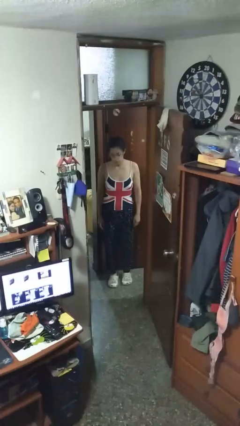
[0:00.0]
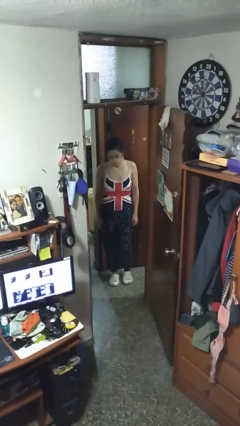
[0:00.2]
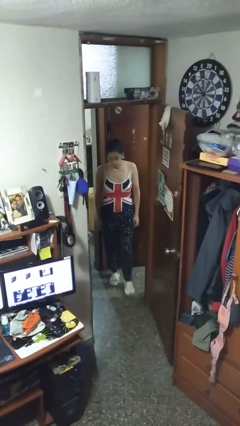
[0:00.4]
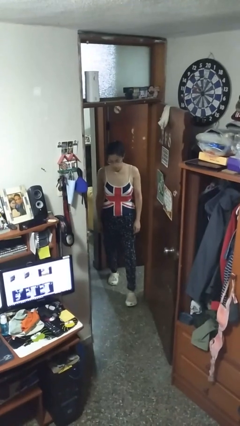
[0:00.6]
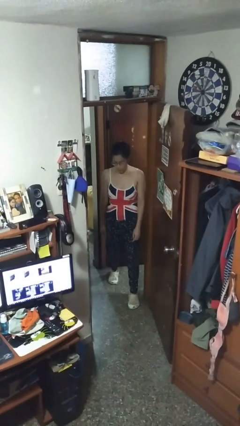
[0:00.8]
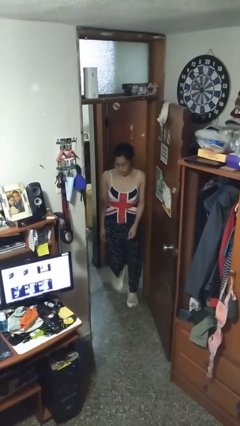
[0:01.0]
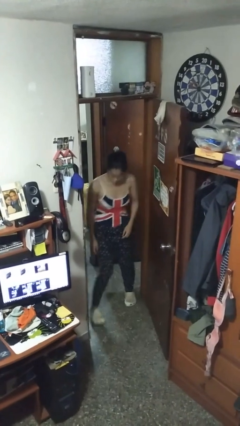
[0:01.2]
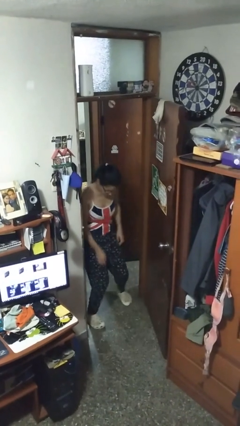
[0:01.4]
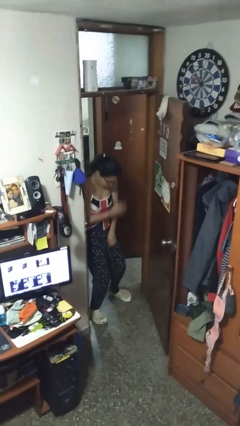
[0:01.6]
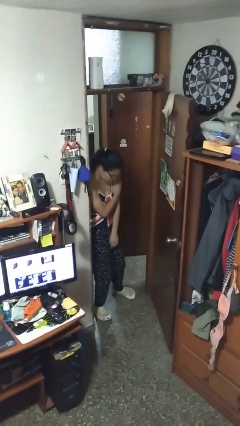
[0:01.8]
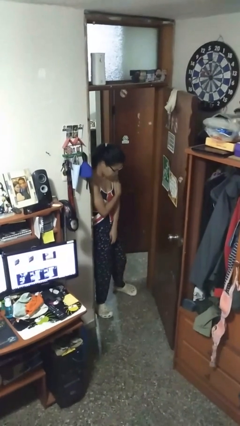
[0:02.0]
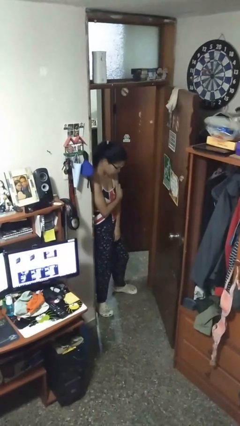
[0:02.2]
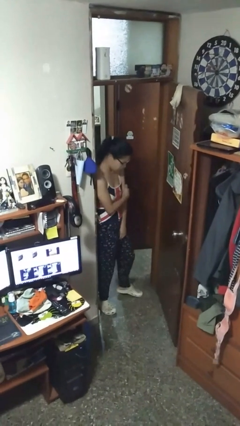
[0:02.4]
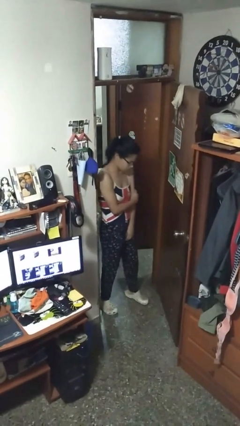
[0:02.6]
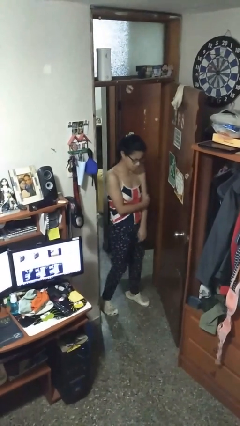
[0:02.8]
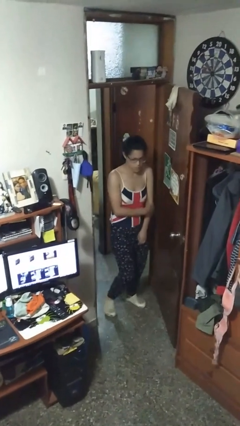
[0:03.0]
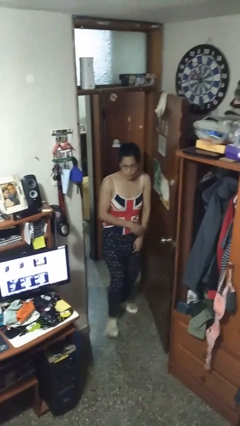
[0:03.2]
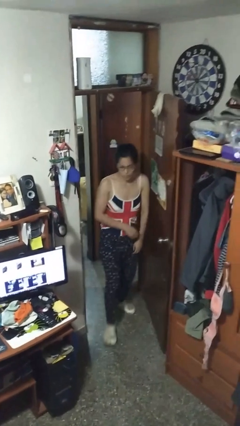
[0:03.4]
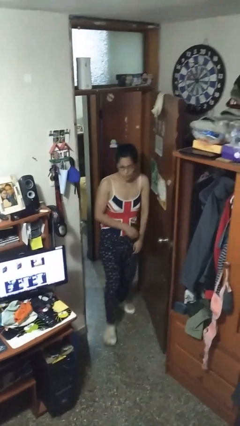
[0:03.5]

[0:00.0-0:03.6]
person bumps into wall

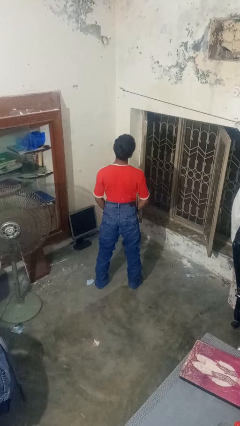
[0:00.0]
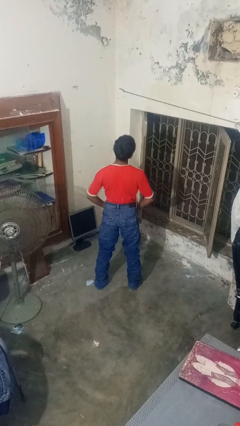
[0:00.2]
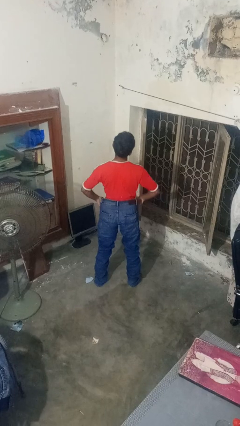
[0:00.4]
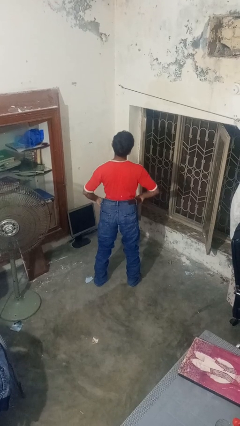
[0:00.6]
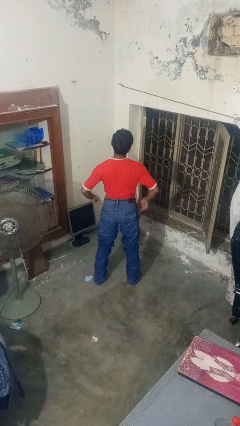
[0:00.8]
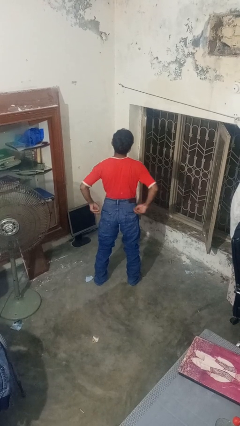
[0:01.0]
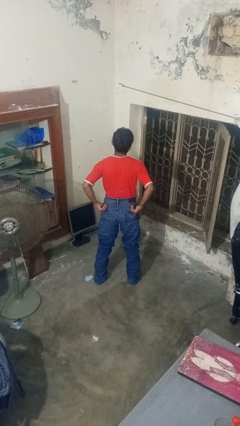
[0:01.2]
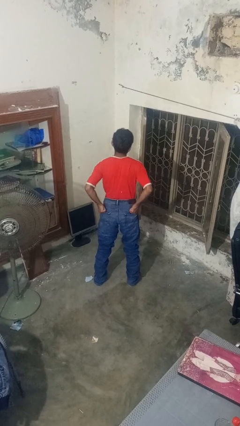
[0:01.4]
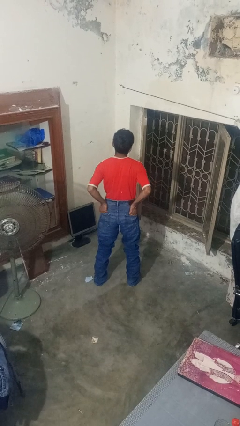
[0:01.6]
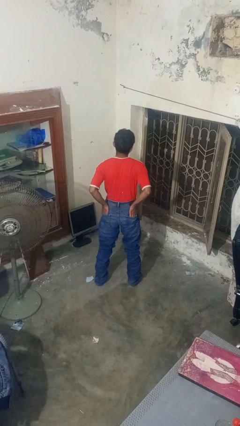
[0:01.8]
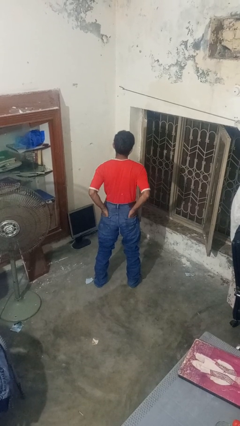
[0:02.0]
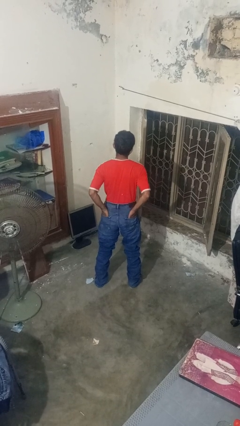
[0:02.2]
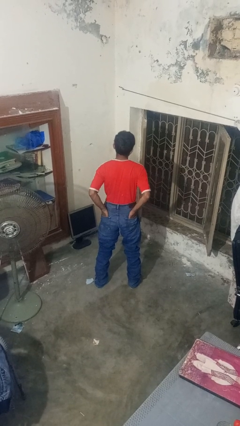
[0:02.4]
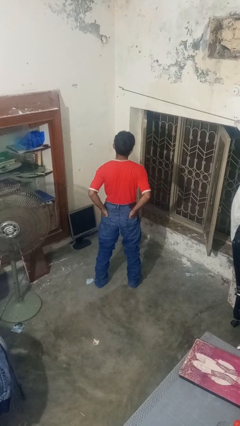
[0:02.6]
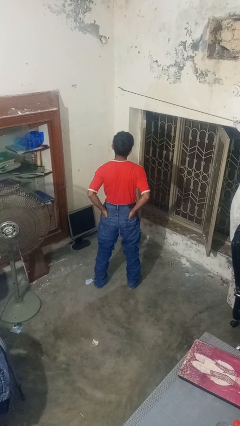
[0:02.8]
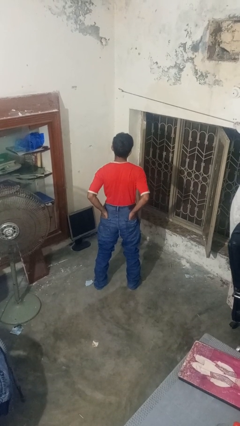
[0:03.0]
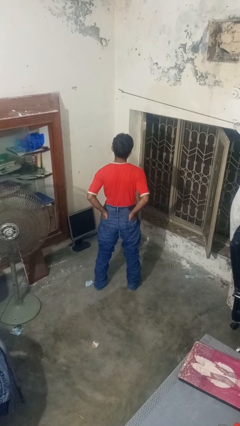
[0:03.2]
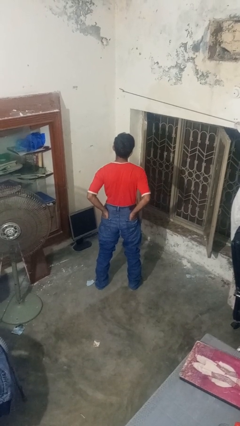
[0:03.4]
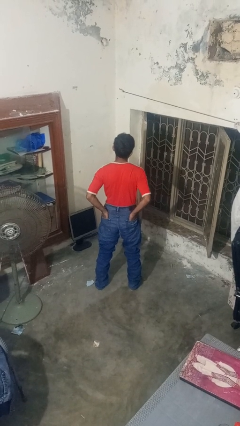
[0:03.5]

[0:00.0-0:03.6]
person puts hands in back pockets

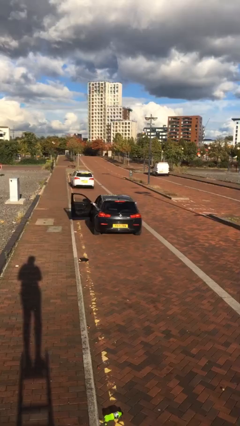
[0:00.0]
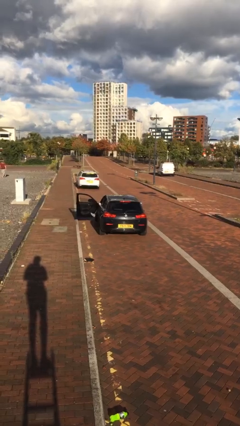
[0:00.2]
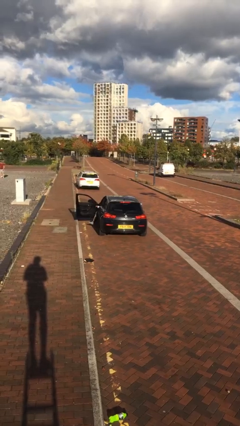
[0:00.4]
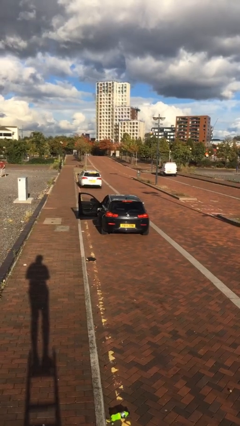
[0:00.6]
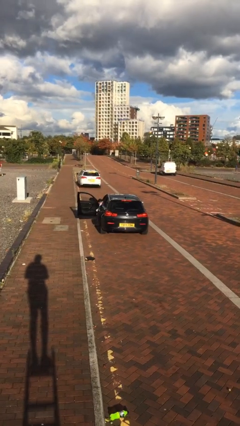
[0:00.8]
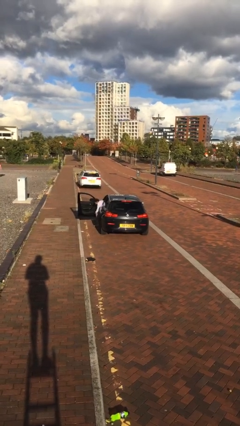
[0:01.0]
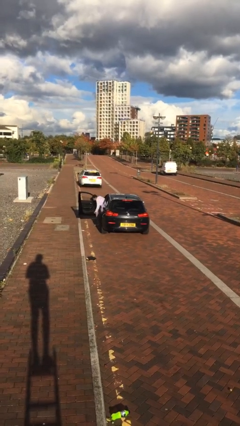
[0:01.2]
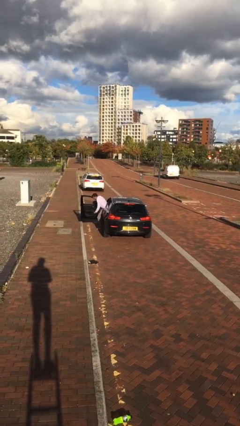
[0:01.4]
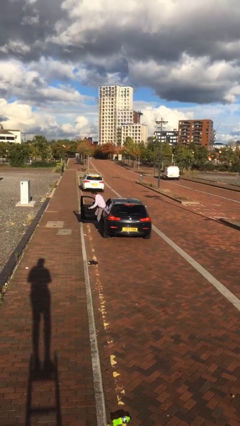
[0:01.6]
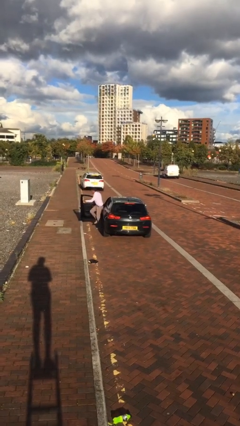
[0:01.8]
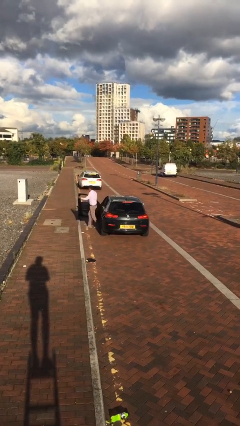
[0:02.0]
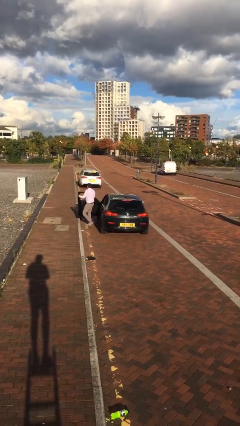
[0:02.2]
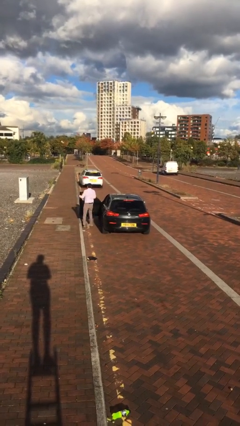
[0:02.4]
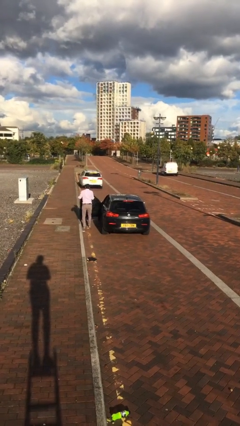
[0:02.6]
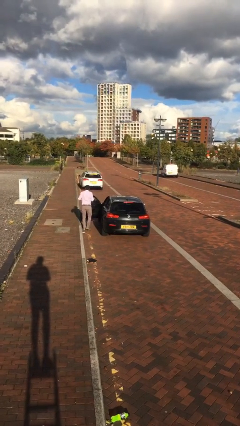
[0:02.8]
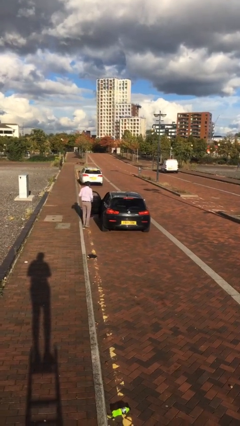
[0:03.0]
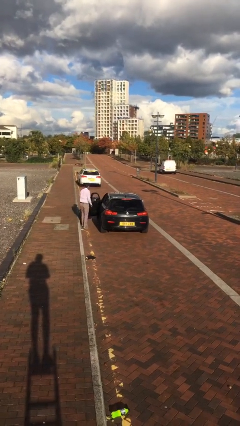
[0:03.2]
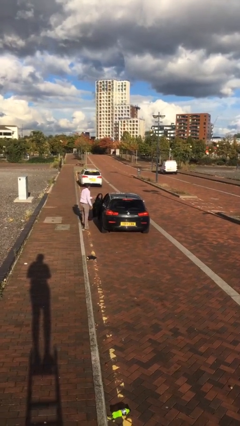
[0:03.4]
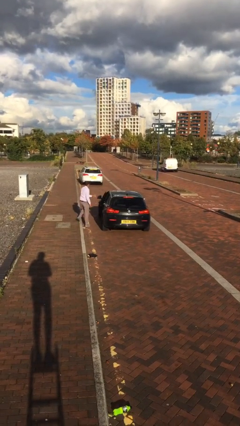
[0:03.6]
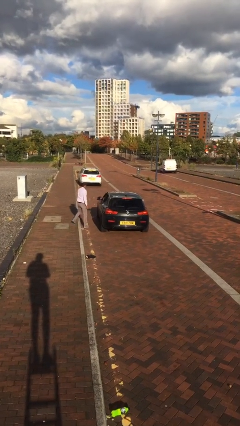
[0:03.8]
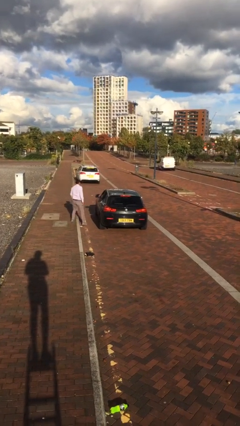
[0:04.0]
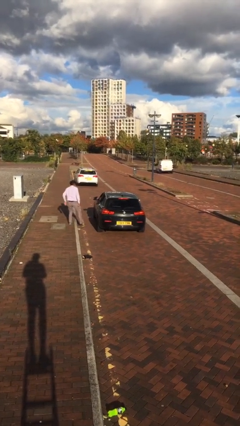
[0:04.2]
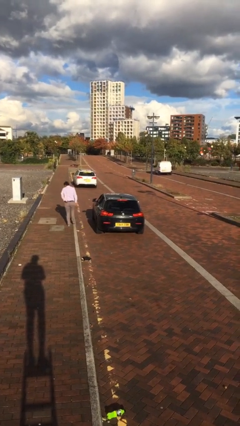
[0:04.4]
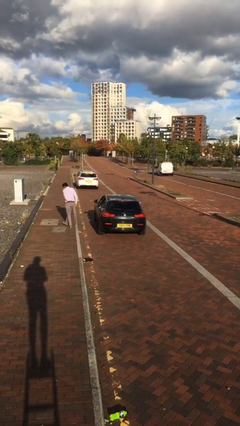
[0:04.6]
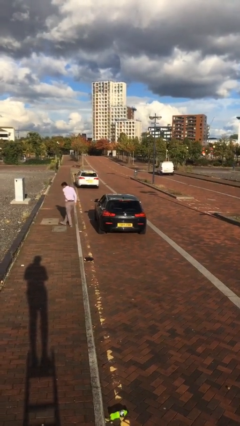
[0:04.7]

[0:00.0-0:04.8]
car drops off person

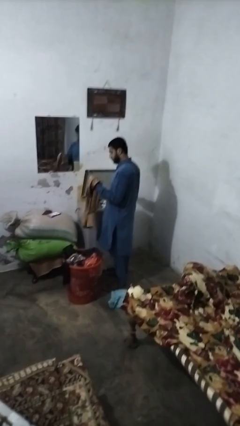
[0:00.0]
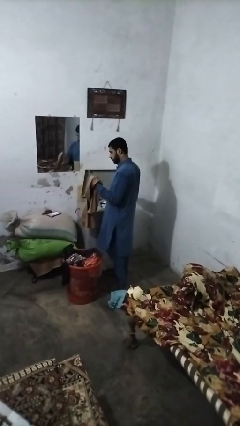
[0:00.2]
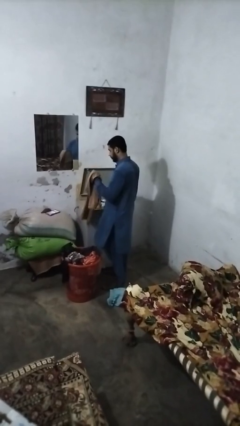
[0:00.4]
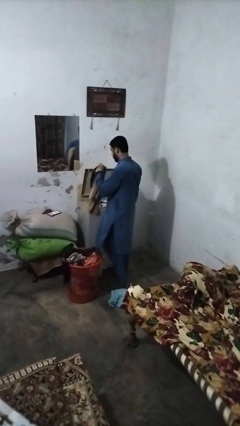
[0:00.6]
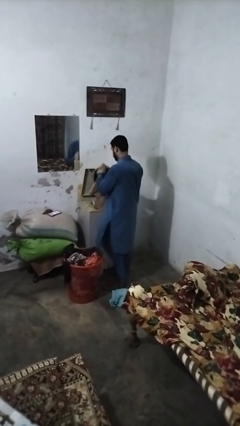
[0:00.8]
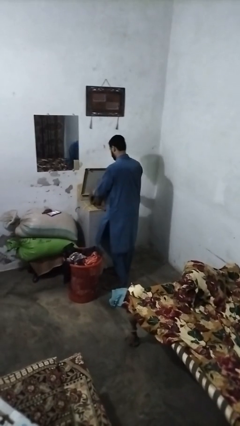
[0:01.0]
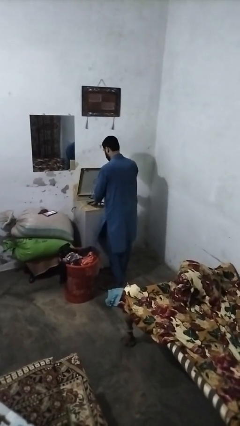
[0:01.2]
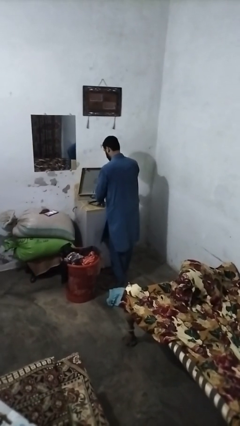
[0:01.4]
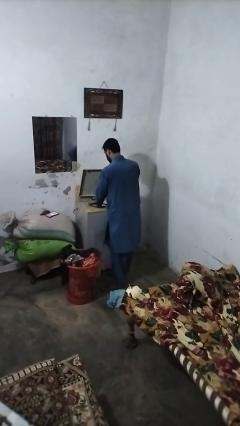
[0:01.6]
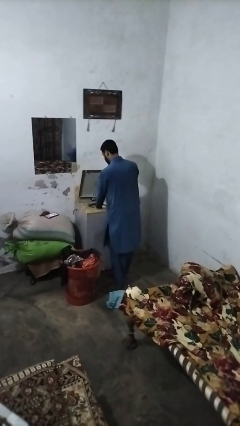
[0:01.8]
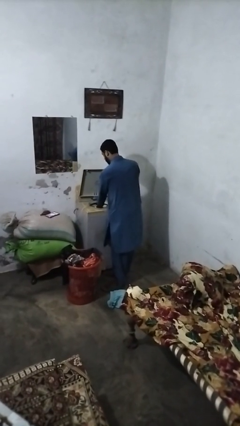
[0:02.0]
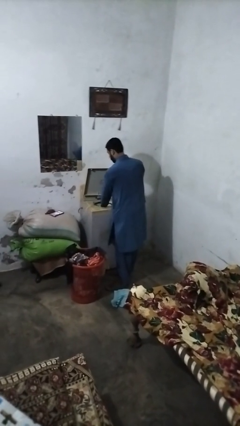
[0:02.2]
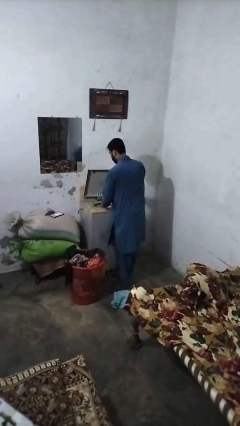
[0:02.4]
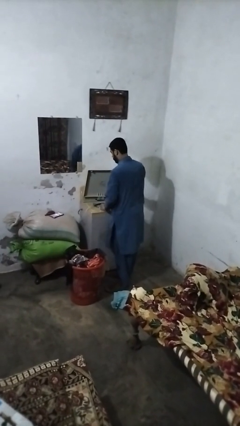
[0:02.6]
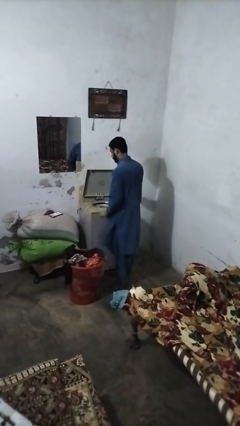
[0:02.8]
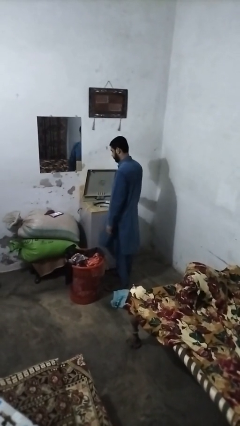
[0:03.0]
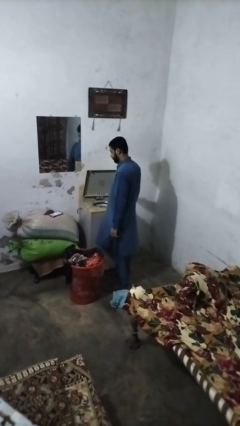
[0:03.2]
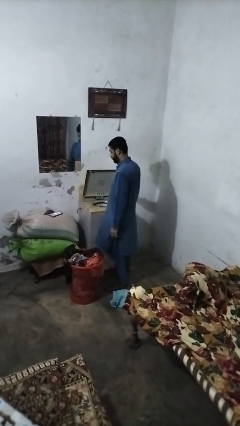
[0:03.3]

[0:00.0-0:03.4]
person loads clotheswasher

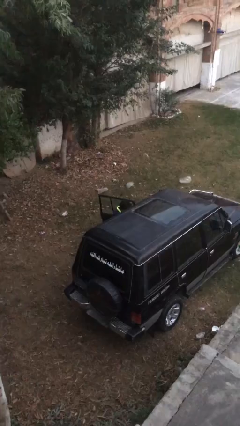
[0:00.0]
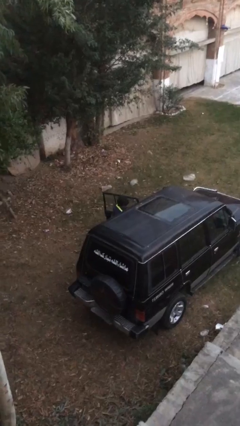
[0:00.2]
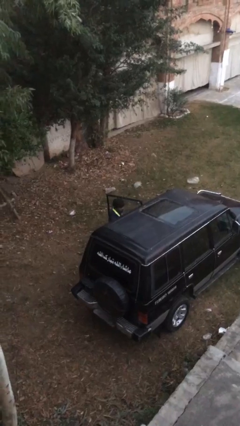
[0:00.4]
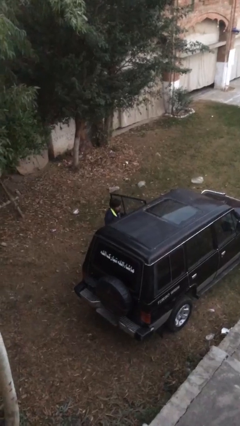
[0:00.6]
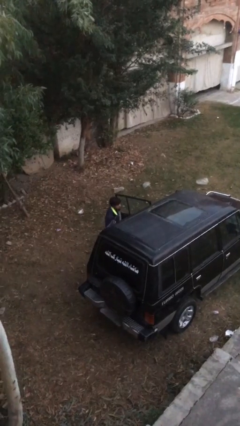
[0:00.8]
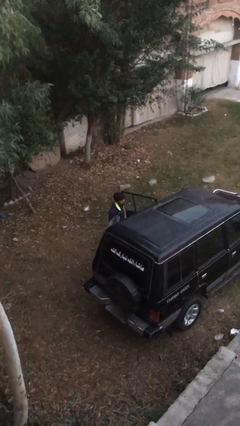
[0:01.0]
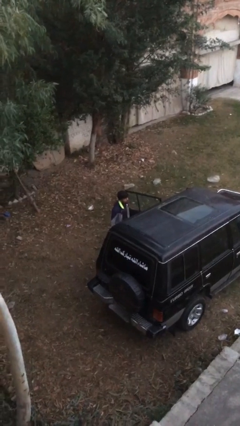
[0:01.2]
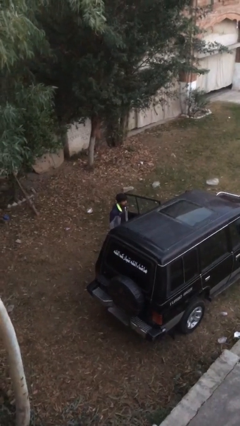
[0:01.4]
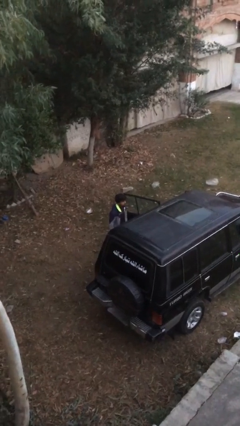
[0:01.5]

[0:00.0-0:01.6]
person exits car

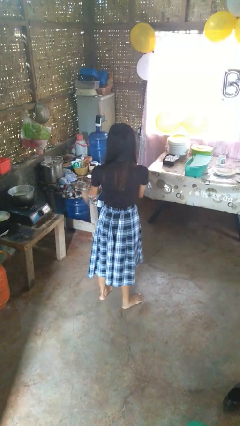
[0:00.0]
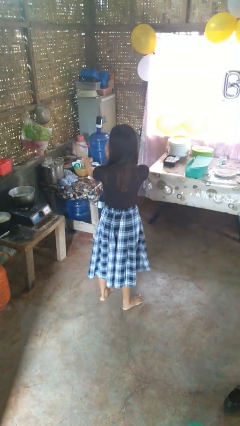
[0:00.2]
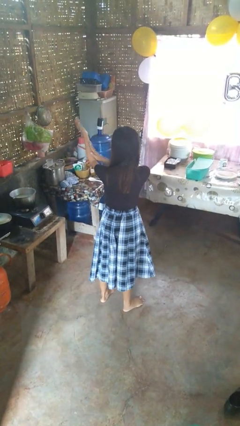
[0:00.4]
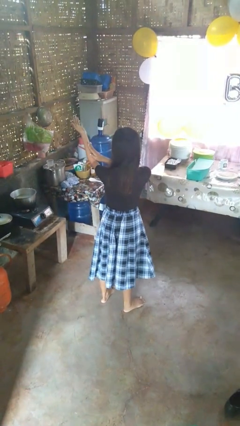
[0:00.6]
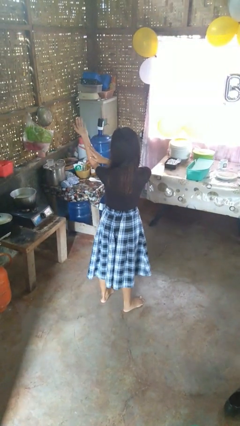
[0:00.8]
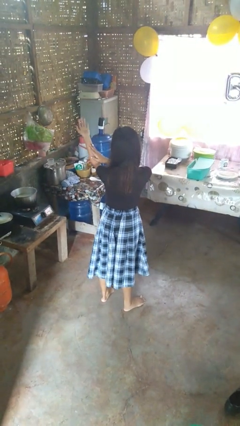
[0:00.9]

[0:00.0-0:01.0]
person swats bug
